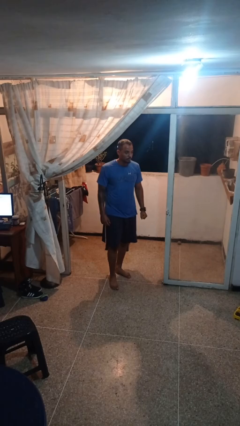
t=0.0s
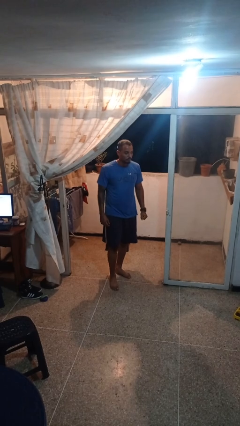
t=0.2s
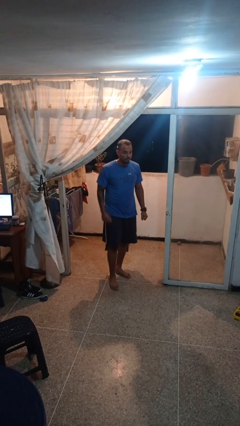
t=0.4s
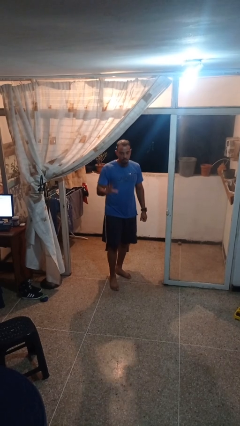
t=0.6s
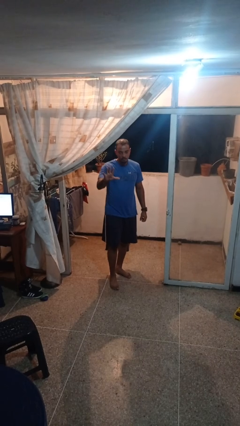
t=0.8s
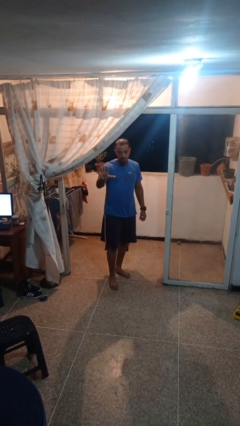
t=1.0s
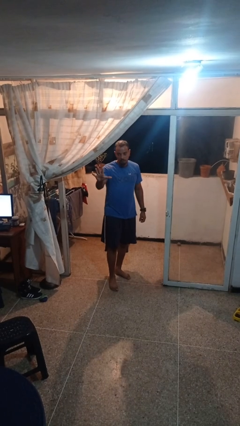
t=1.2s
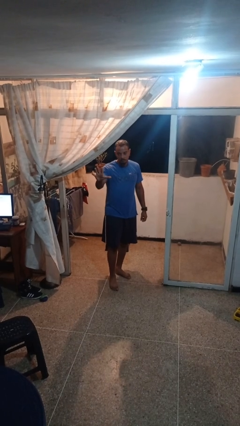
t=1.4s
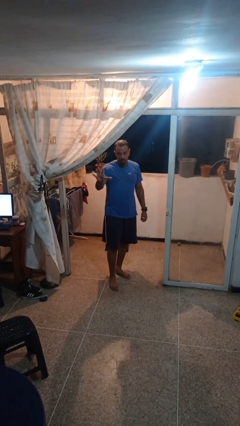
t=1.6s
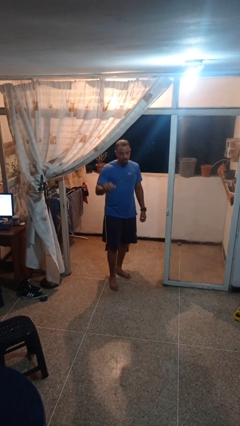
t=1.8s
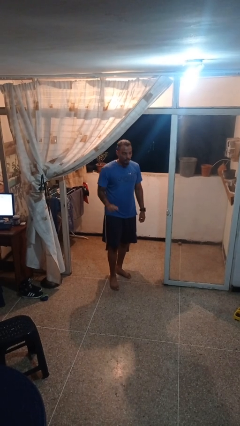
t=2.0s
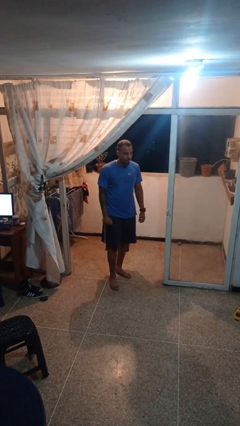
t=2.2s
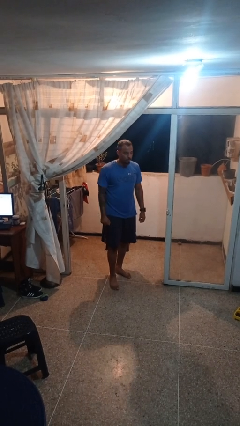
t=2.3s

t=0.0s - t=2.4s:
person gestures number five

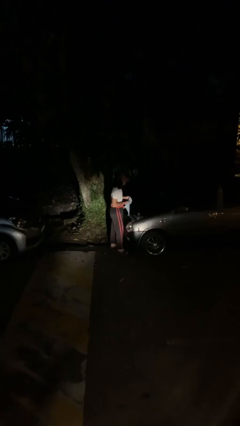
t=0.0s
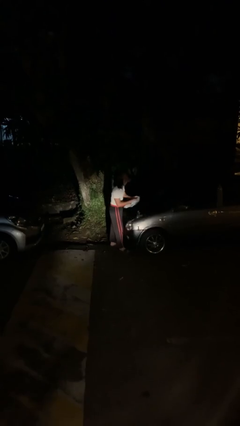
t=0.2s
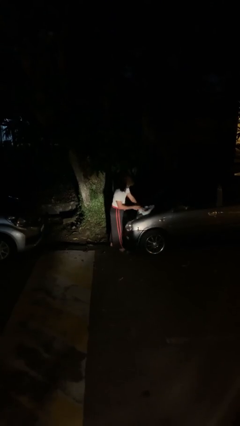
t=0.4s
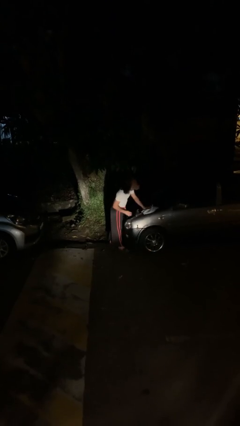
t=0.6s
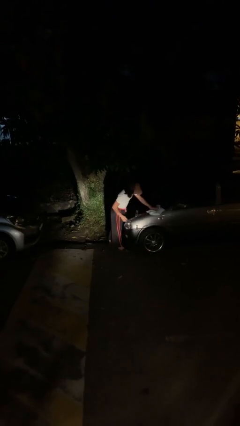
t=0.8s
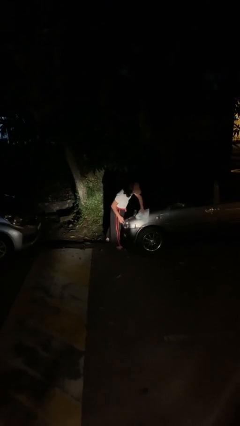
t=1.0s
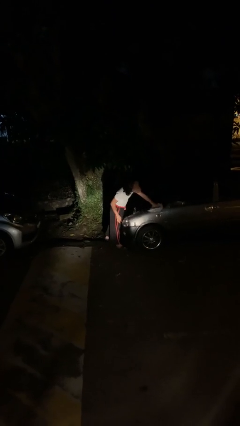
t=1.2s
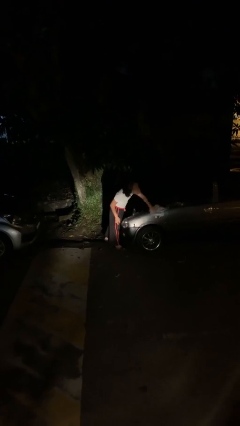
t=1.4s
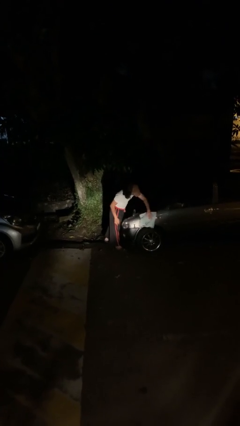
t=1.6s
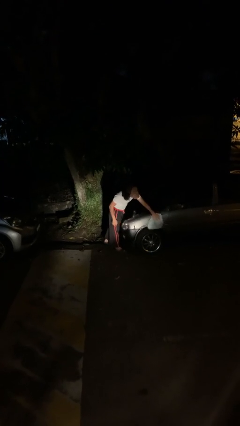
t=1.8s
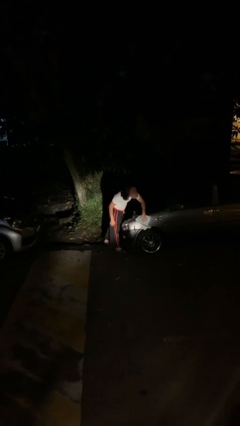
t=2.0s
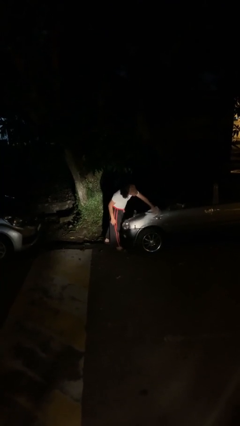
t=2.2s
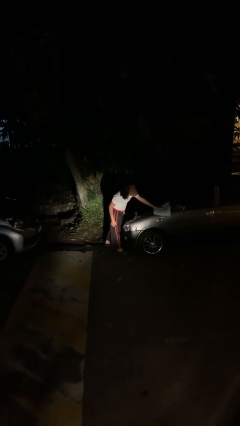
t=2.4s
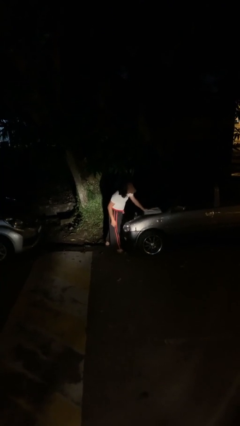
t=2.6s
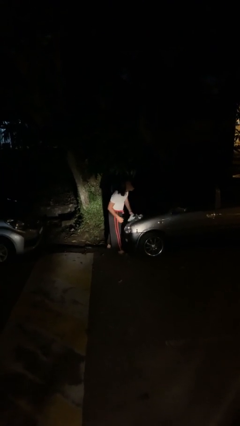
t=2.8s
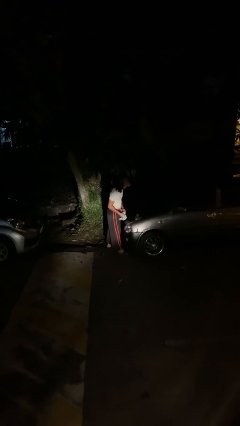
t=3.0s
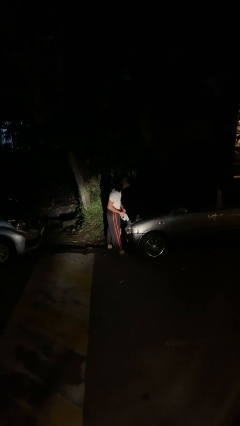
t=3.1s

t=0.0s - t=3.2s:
person polishes car with rag

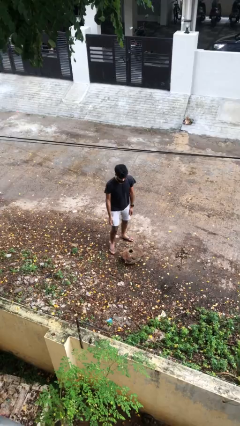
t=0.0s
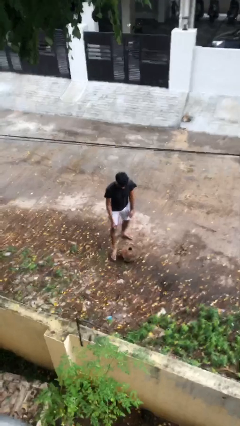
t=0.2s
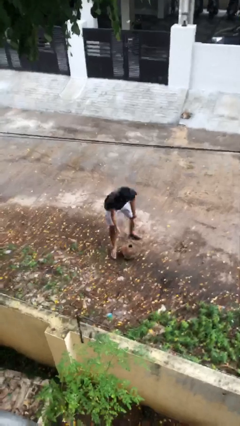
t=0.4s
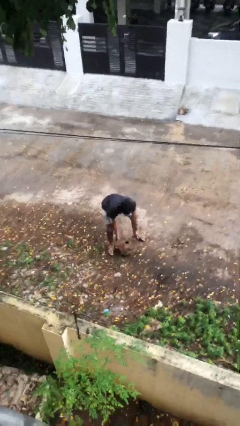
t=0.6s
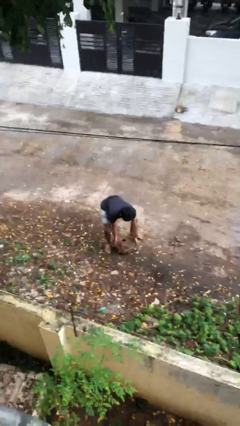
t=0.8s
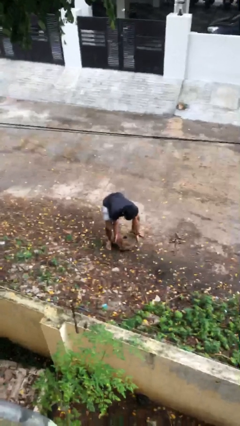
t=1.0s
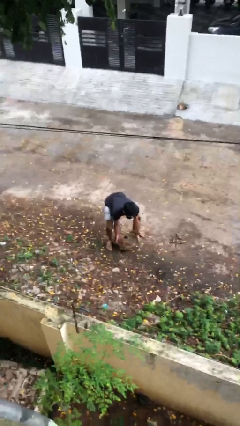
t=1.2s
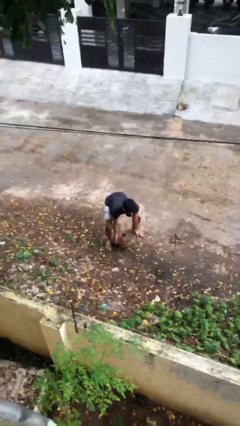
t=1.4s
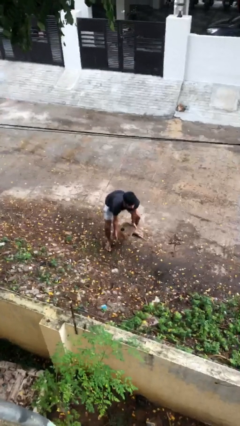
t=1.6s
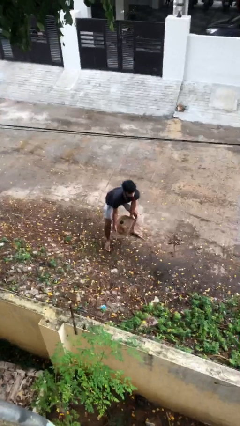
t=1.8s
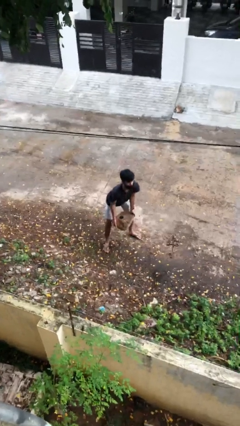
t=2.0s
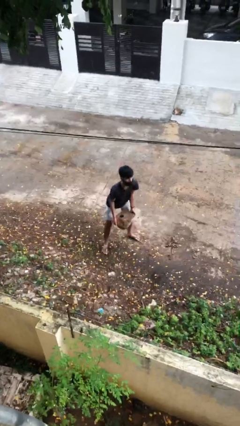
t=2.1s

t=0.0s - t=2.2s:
person picks up object from floor

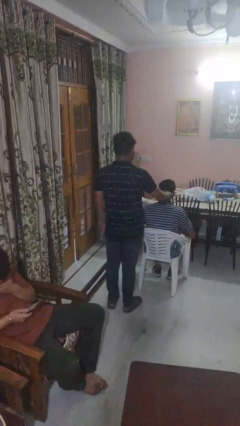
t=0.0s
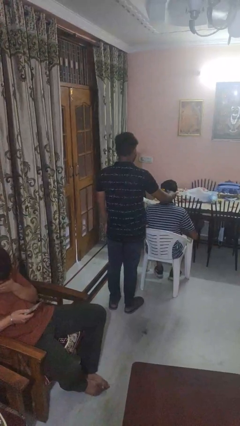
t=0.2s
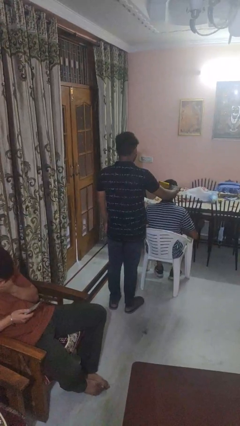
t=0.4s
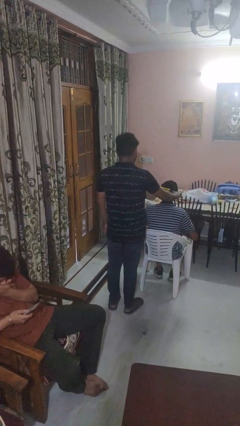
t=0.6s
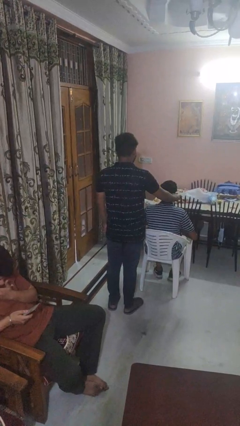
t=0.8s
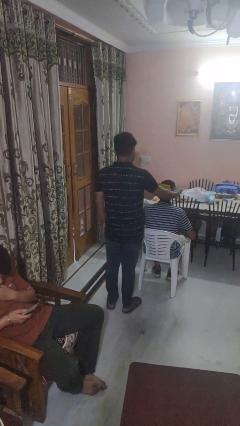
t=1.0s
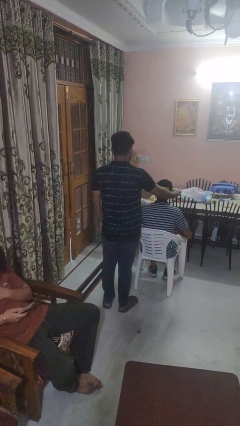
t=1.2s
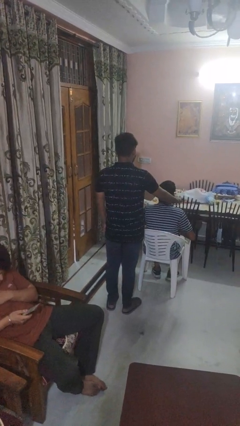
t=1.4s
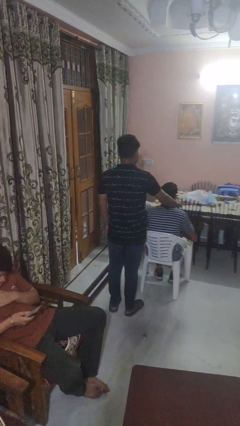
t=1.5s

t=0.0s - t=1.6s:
person brushes hair of person

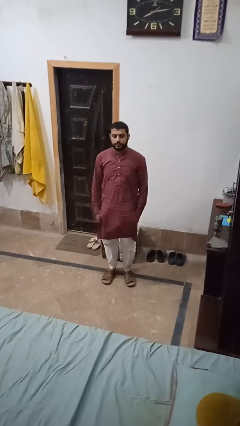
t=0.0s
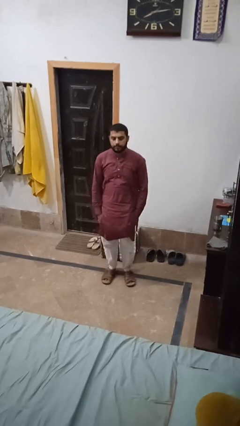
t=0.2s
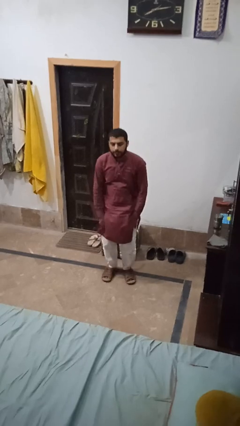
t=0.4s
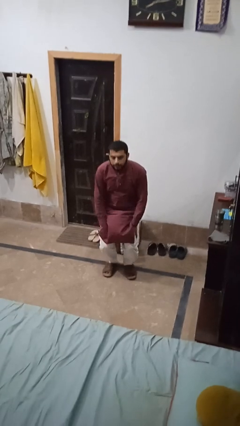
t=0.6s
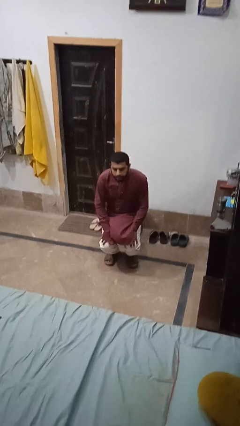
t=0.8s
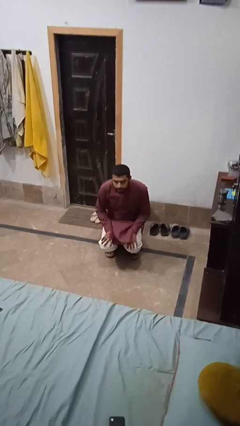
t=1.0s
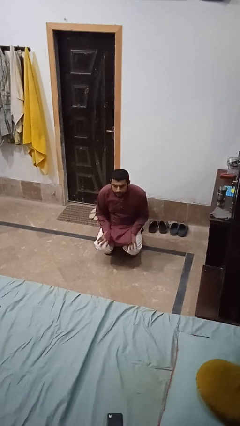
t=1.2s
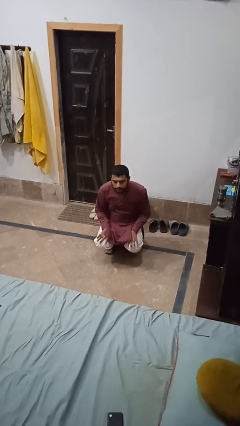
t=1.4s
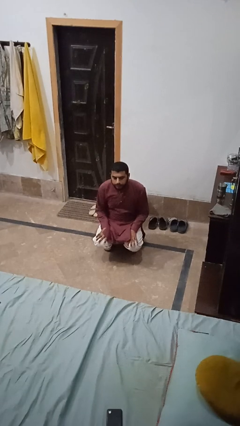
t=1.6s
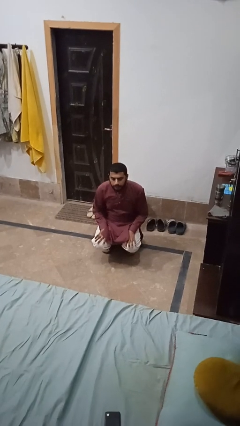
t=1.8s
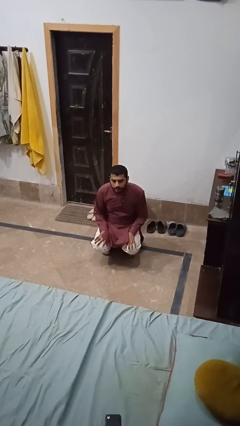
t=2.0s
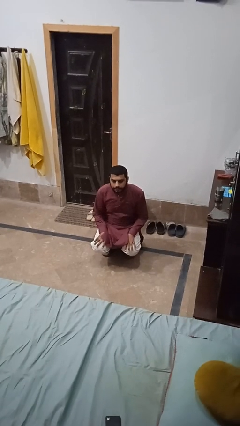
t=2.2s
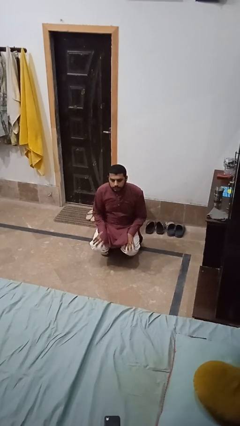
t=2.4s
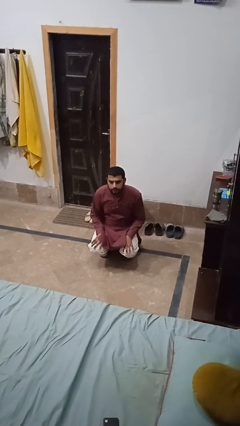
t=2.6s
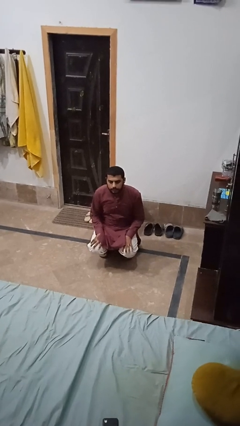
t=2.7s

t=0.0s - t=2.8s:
person squats

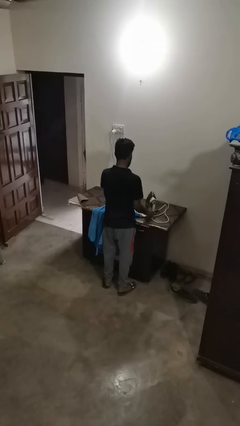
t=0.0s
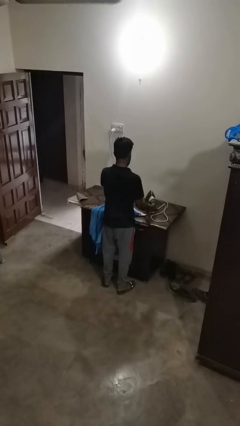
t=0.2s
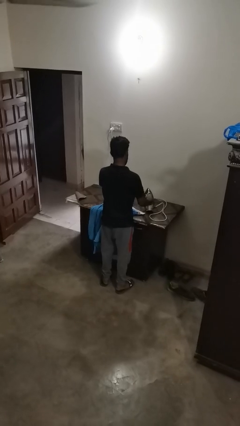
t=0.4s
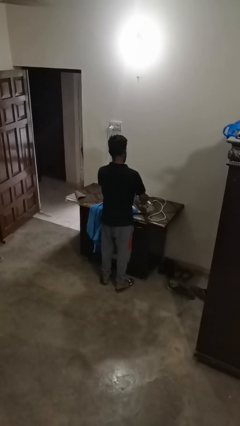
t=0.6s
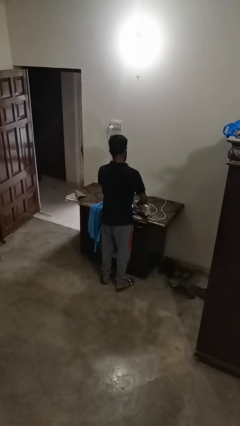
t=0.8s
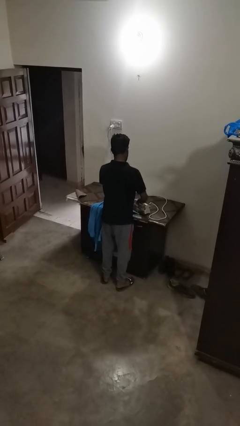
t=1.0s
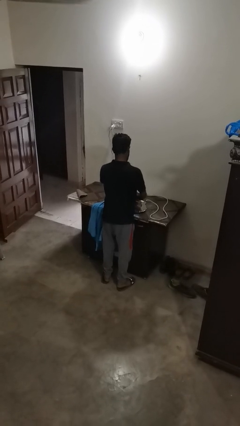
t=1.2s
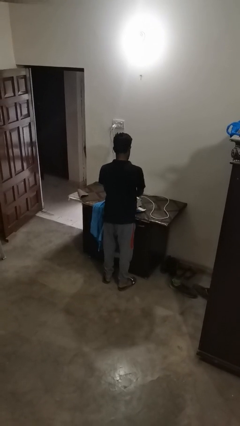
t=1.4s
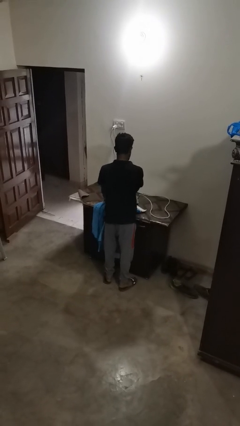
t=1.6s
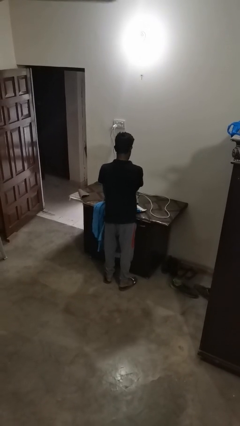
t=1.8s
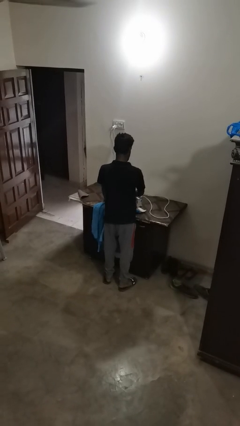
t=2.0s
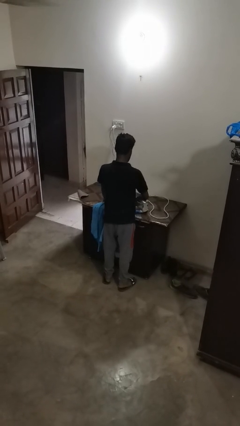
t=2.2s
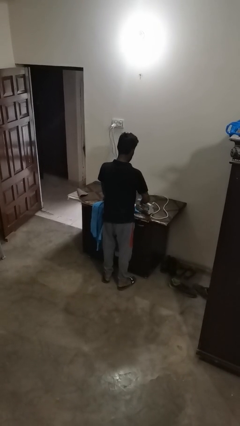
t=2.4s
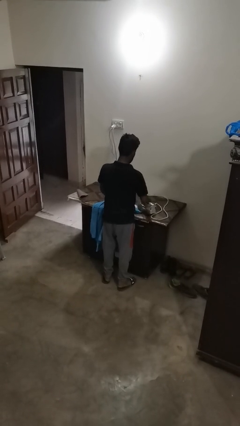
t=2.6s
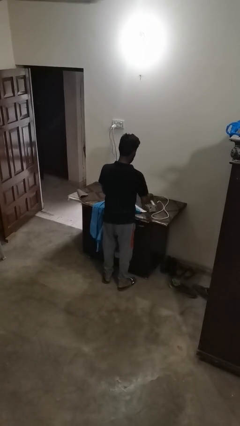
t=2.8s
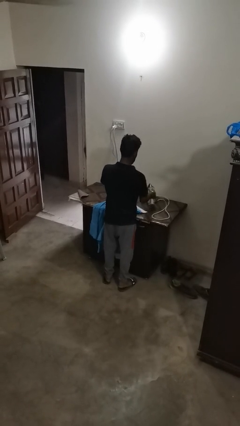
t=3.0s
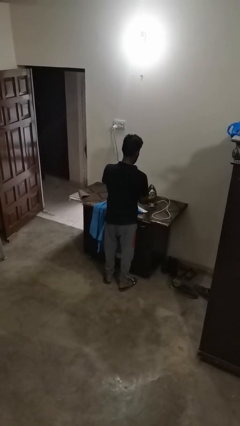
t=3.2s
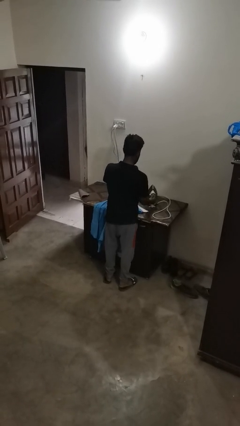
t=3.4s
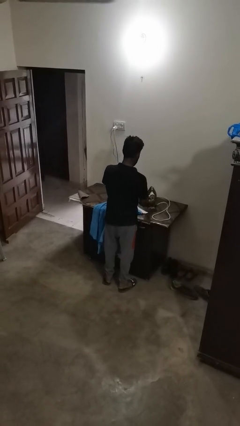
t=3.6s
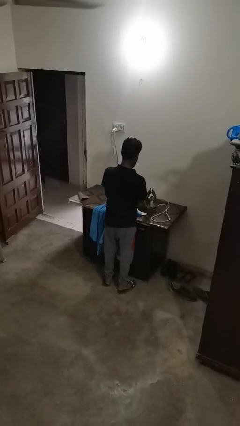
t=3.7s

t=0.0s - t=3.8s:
person irons clothes

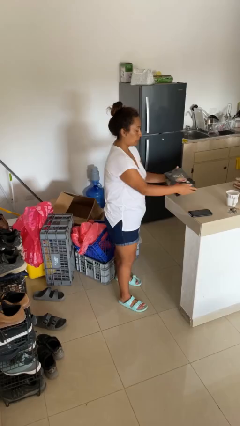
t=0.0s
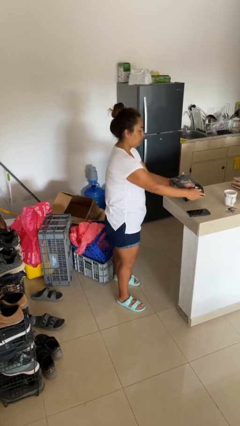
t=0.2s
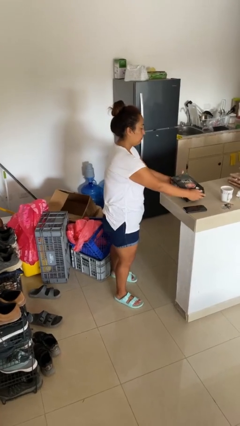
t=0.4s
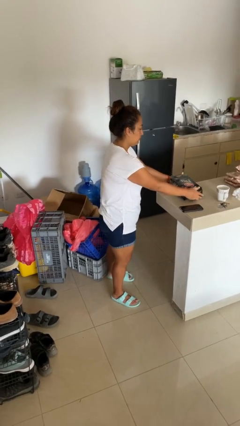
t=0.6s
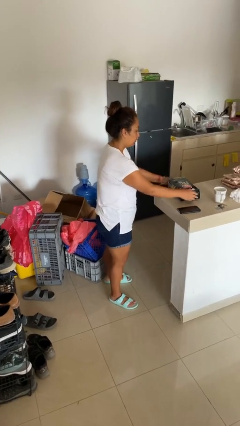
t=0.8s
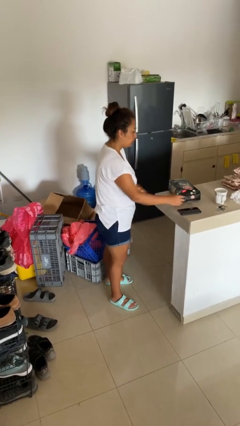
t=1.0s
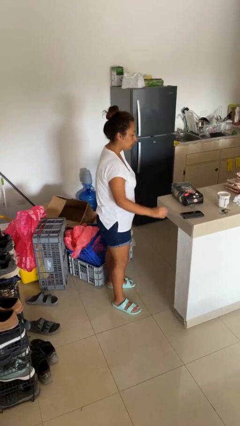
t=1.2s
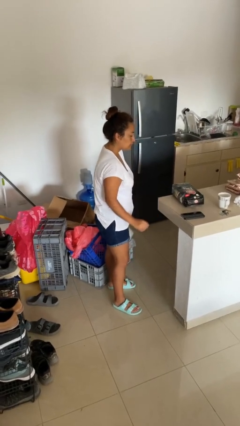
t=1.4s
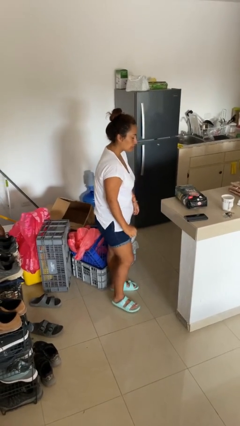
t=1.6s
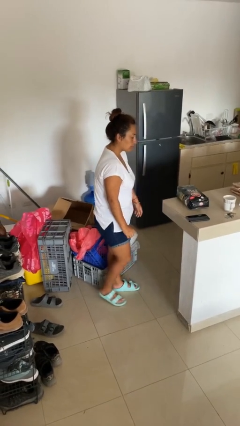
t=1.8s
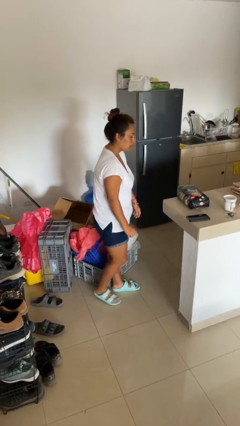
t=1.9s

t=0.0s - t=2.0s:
person puts down object on countertop
